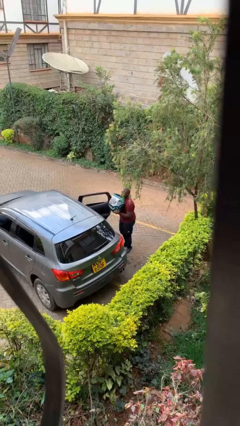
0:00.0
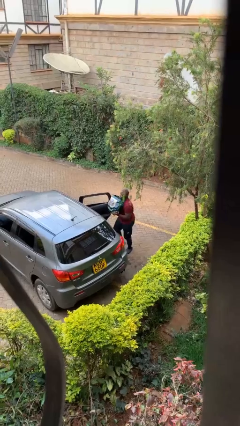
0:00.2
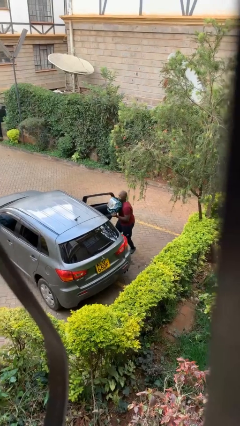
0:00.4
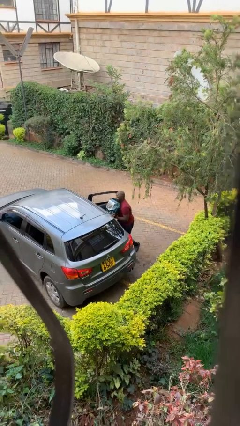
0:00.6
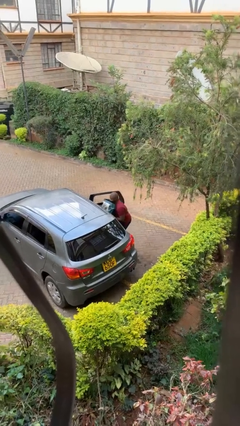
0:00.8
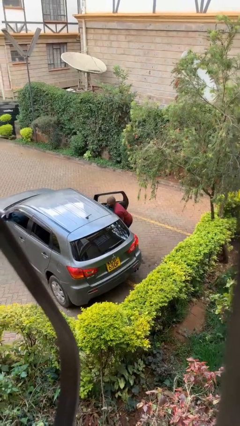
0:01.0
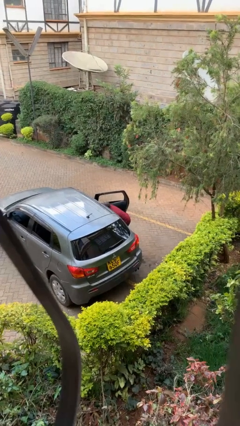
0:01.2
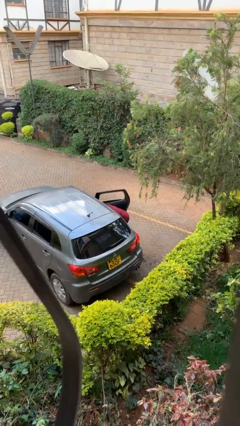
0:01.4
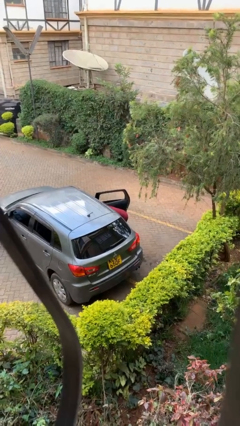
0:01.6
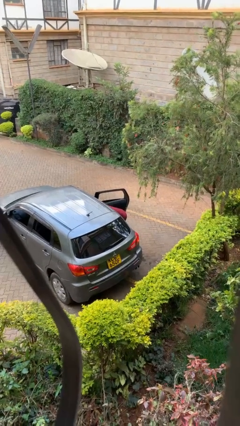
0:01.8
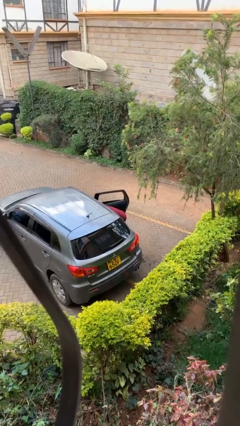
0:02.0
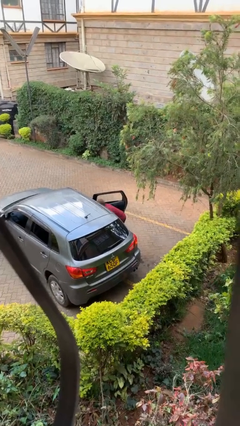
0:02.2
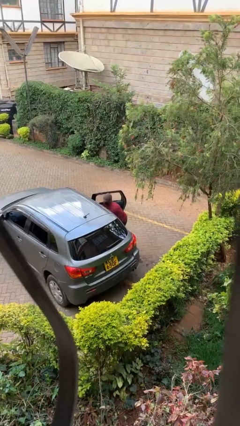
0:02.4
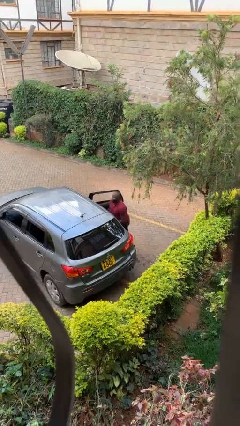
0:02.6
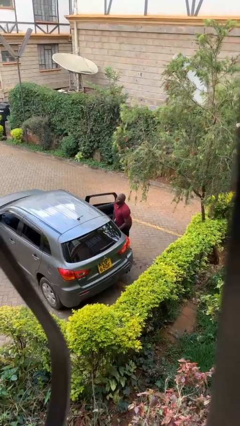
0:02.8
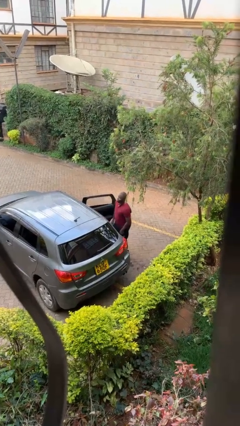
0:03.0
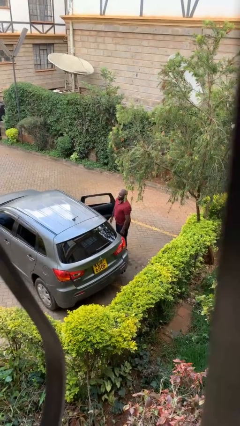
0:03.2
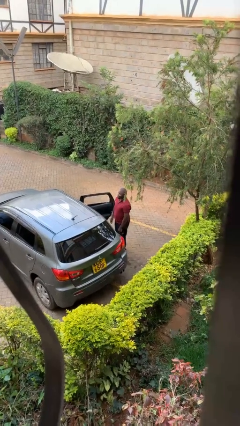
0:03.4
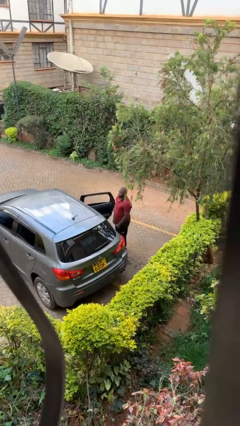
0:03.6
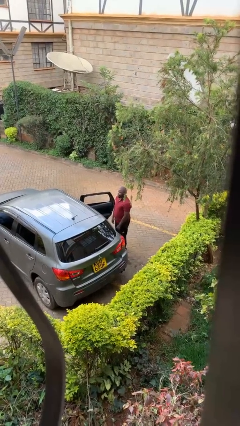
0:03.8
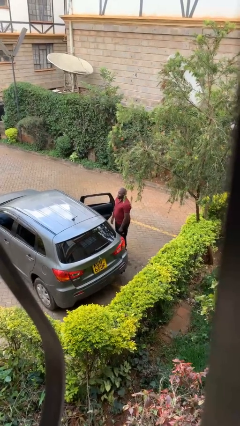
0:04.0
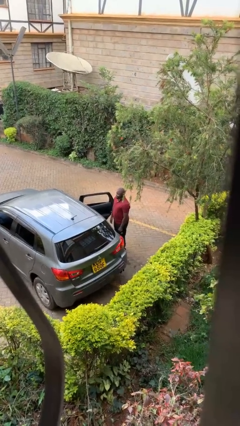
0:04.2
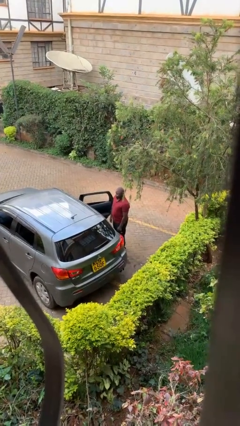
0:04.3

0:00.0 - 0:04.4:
person loads car

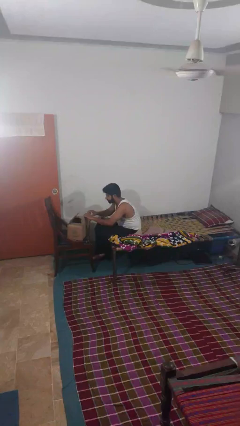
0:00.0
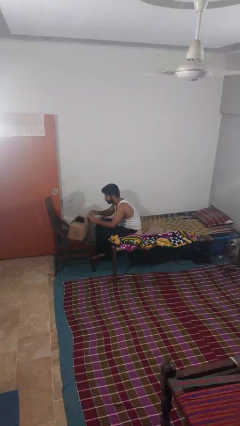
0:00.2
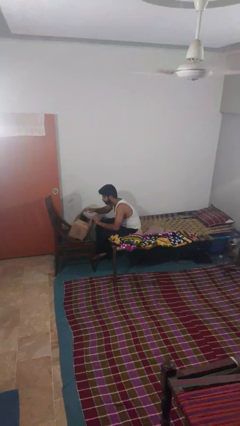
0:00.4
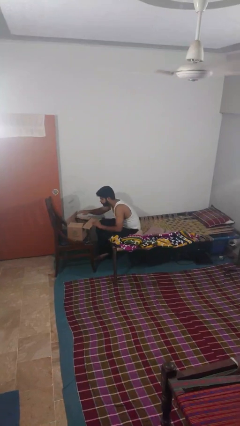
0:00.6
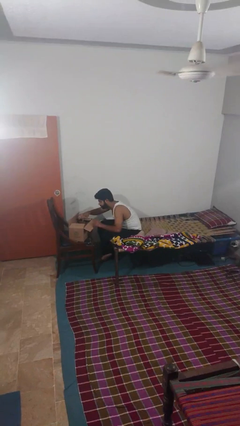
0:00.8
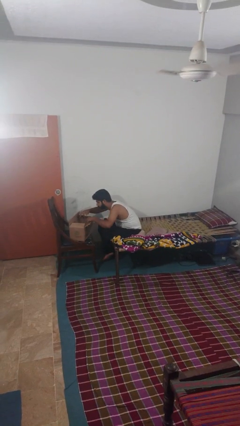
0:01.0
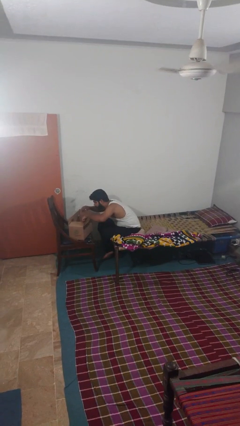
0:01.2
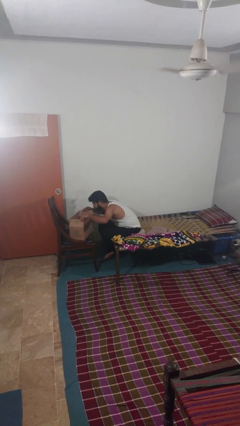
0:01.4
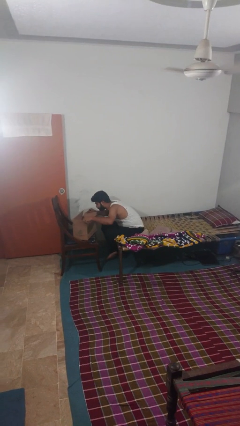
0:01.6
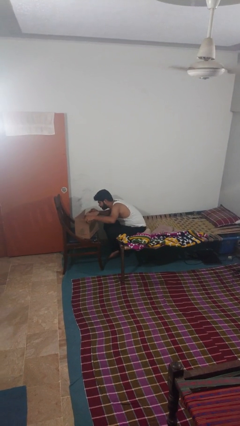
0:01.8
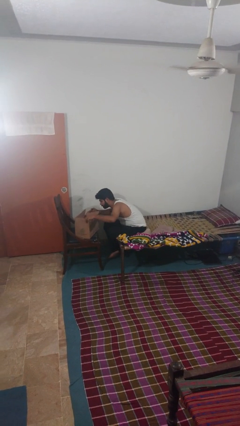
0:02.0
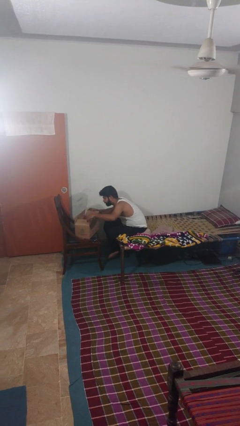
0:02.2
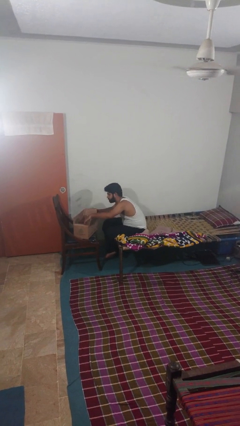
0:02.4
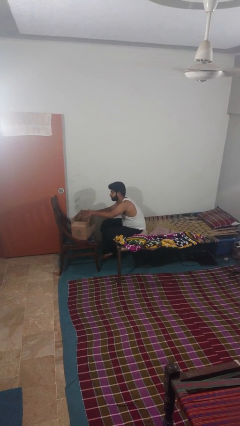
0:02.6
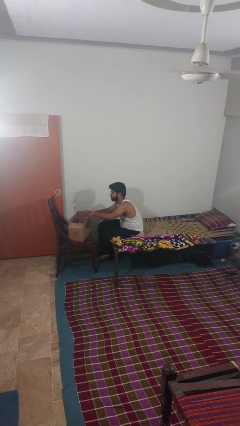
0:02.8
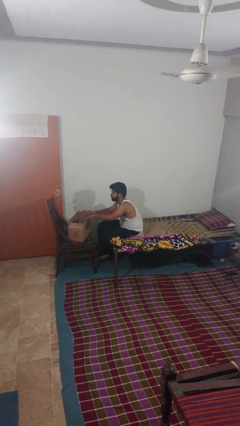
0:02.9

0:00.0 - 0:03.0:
person opens box

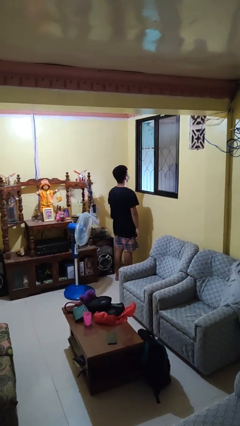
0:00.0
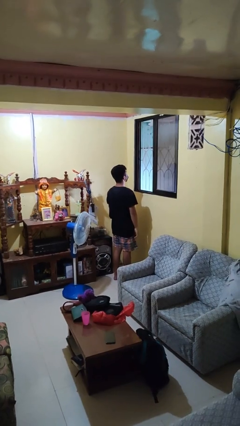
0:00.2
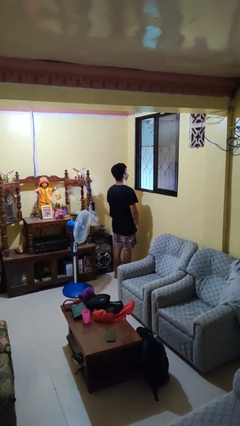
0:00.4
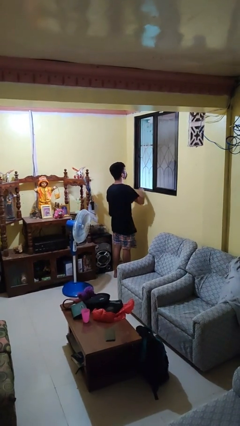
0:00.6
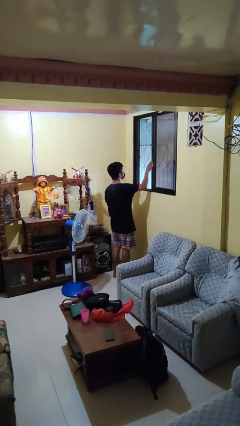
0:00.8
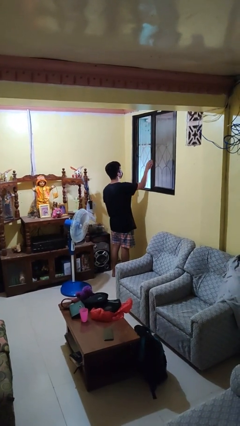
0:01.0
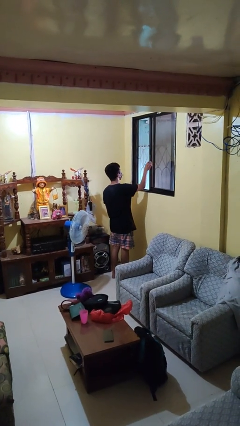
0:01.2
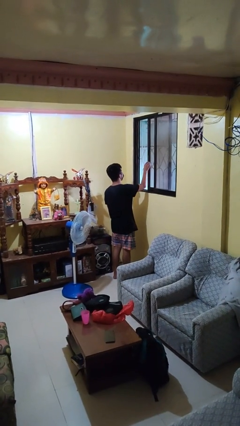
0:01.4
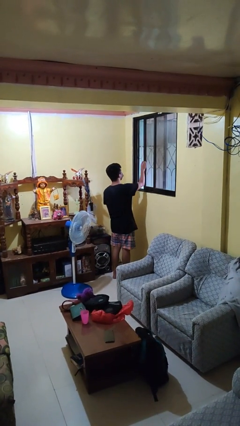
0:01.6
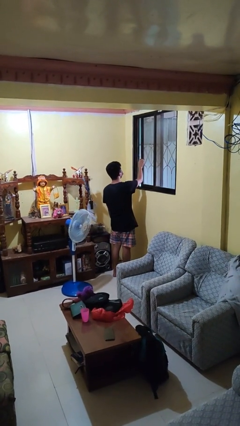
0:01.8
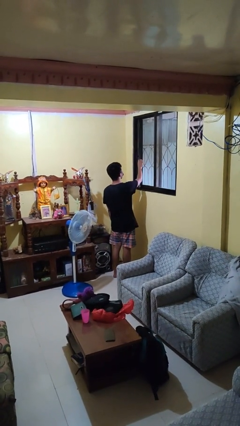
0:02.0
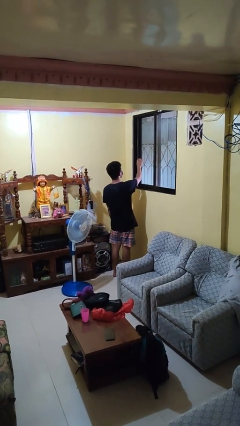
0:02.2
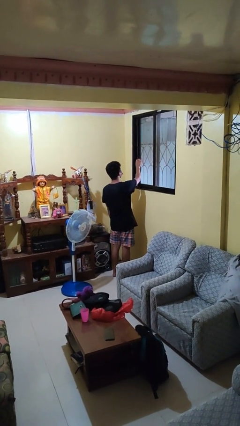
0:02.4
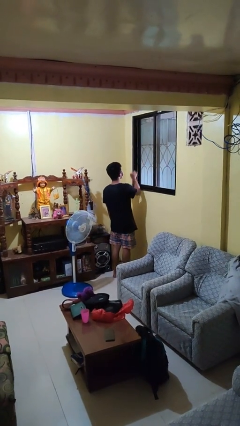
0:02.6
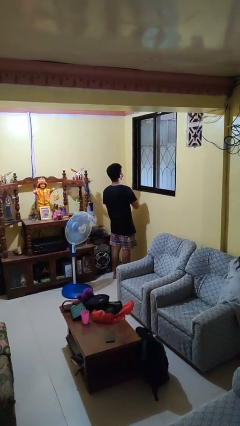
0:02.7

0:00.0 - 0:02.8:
person closes home window

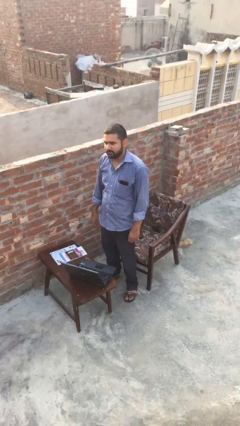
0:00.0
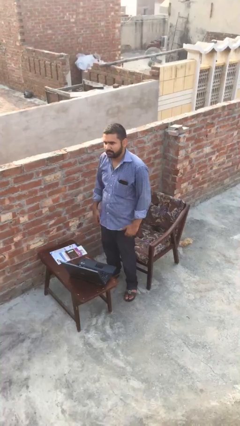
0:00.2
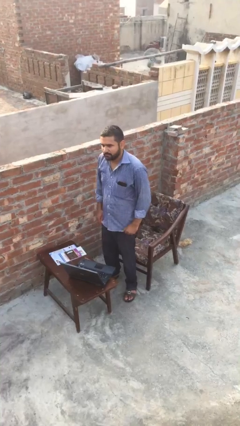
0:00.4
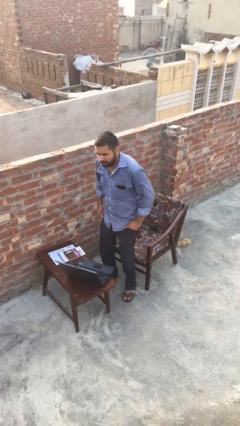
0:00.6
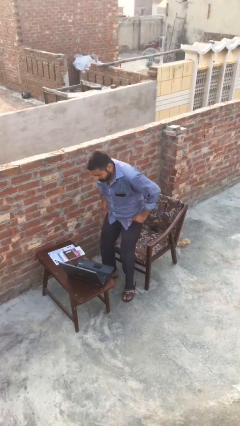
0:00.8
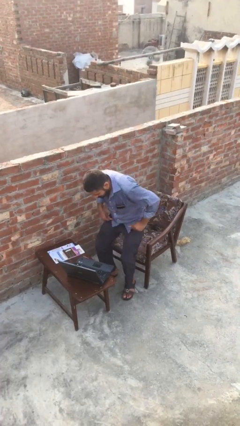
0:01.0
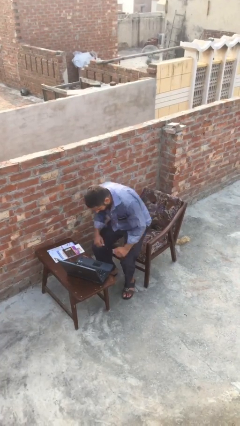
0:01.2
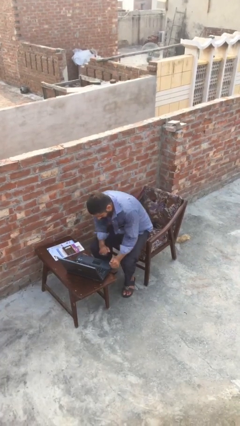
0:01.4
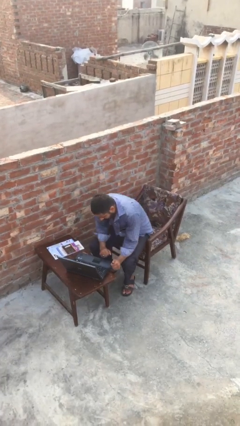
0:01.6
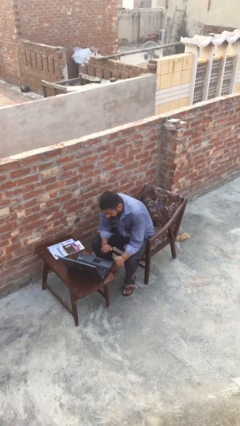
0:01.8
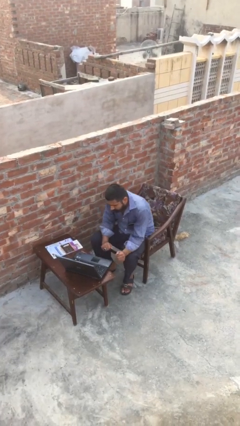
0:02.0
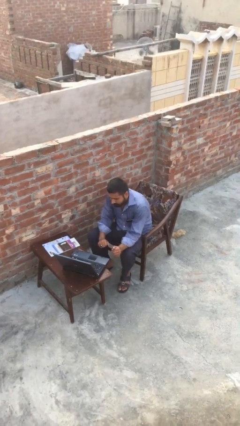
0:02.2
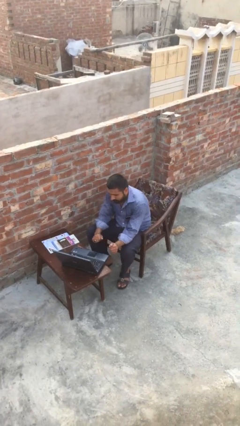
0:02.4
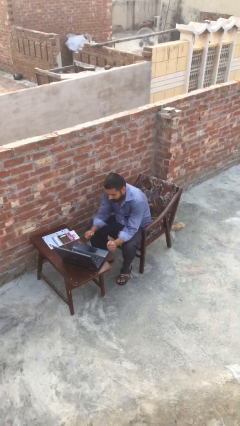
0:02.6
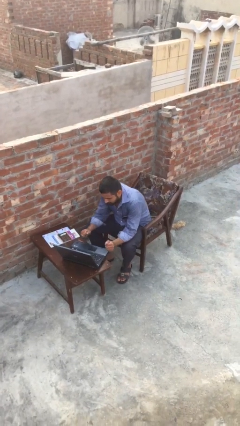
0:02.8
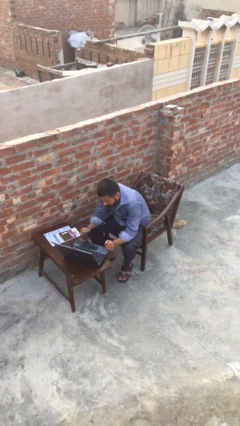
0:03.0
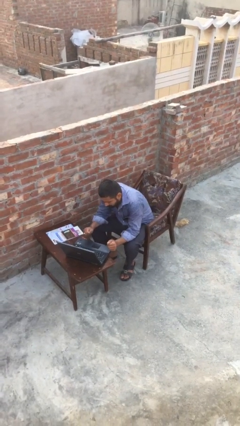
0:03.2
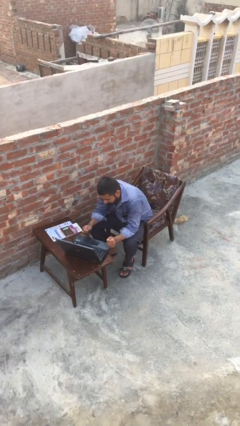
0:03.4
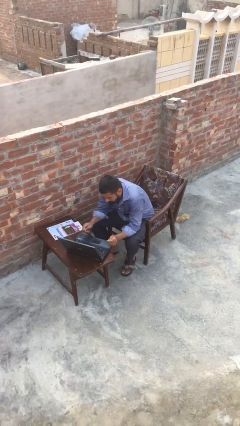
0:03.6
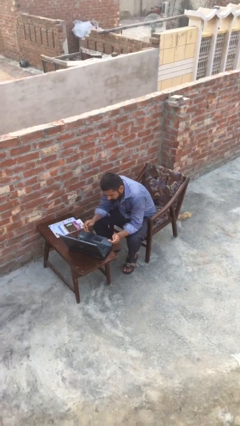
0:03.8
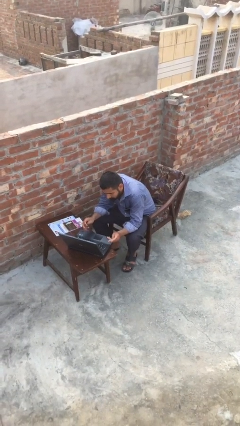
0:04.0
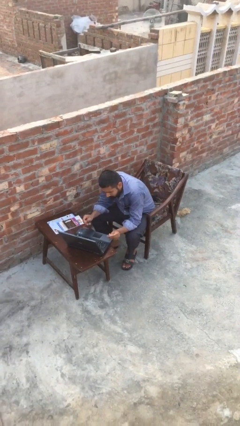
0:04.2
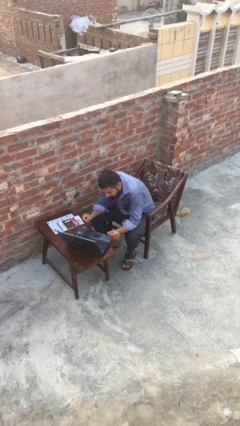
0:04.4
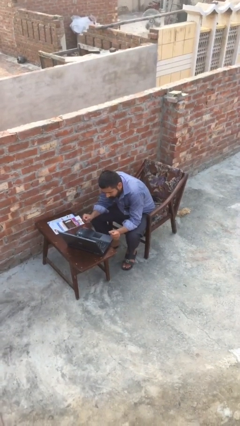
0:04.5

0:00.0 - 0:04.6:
person sits down

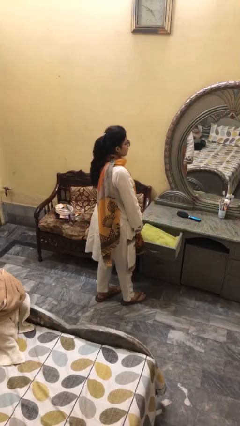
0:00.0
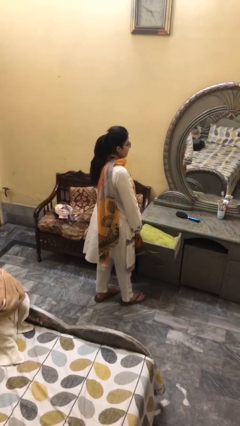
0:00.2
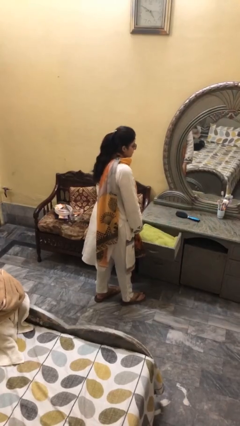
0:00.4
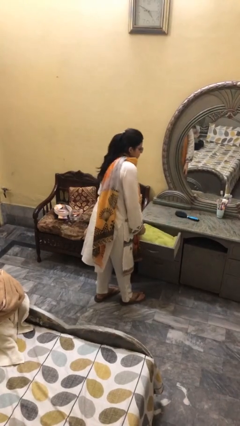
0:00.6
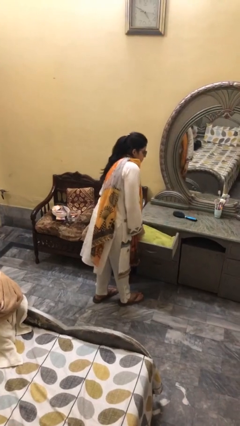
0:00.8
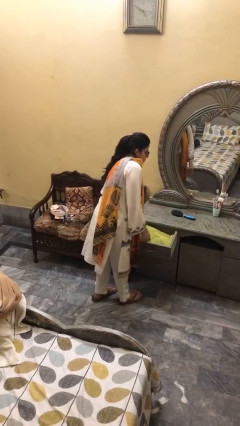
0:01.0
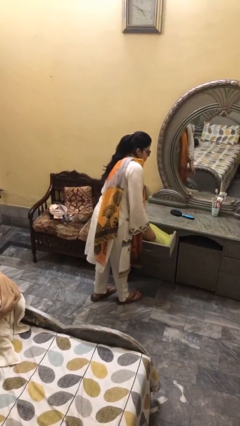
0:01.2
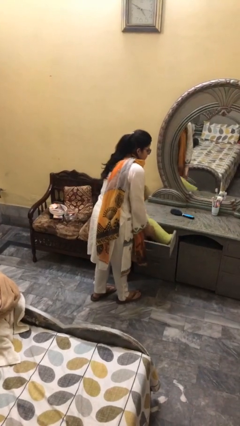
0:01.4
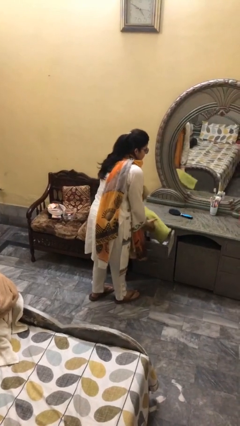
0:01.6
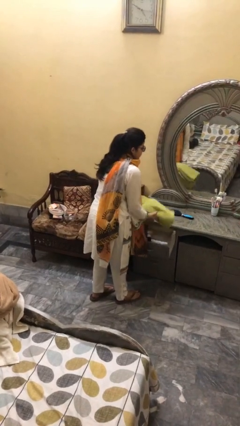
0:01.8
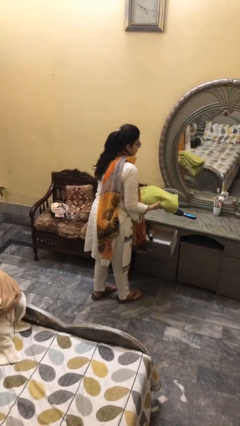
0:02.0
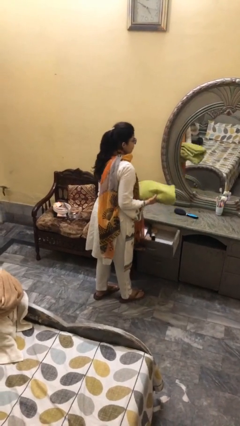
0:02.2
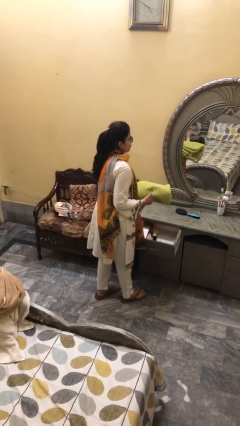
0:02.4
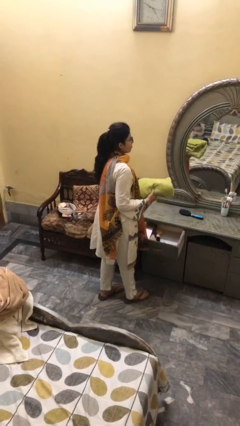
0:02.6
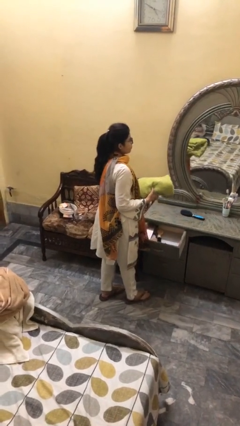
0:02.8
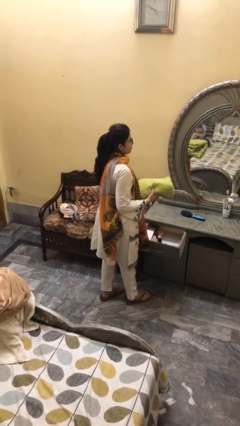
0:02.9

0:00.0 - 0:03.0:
person takes clothes from dresser
